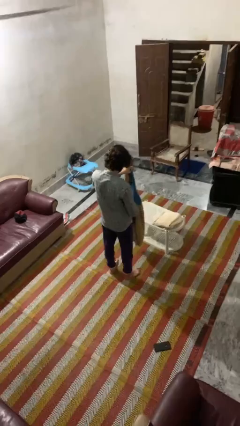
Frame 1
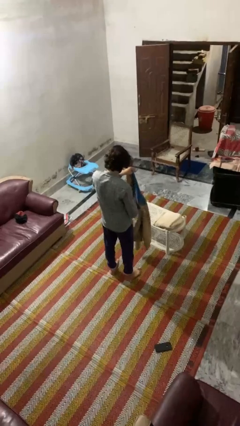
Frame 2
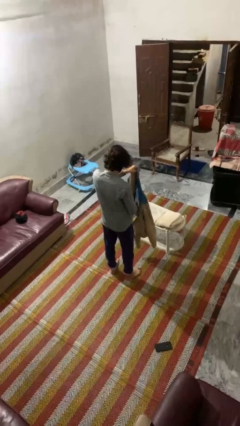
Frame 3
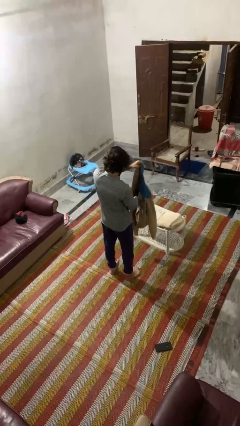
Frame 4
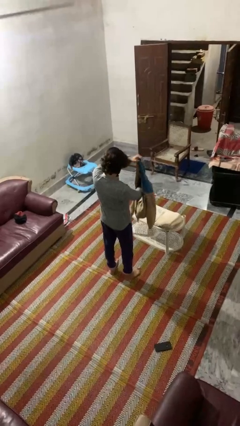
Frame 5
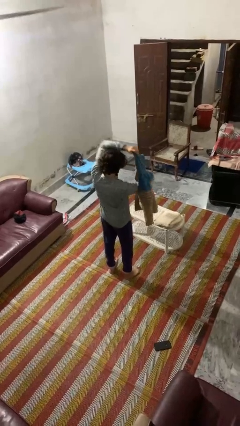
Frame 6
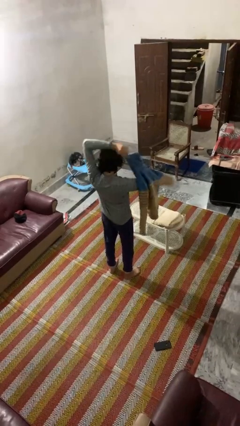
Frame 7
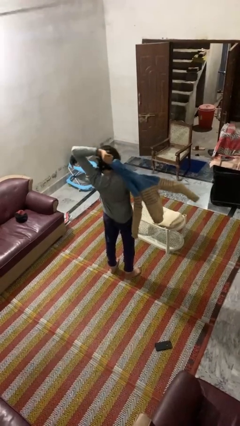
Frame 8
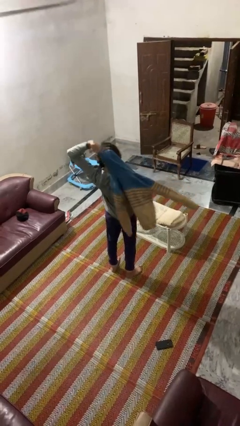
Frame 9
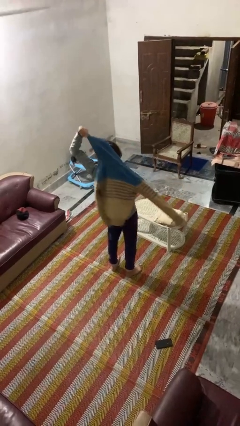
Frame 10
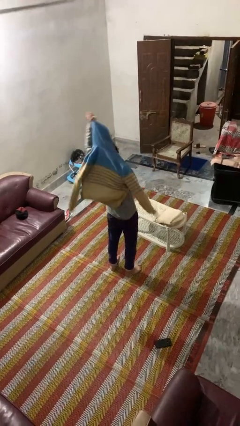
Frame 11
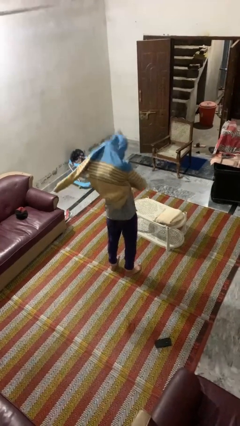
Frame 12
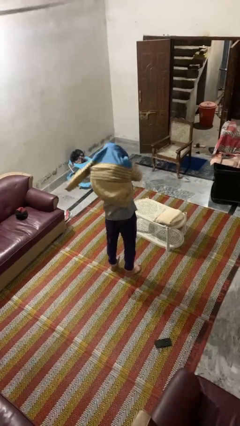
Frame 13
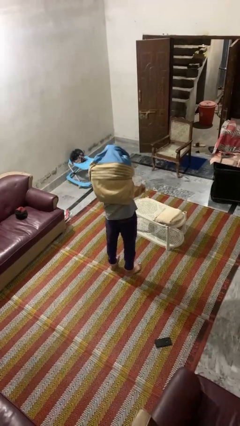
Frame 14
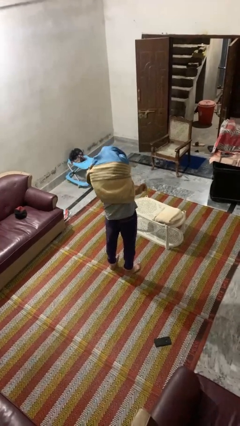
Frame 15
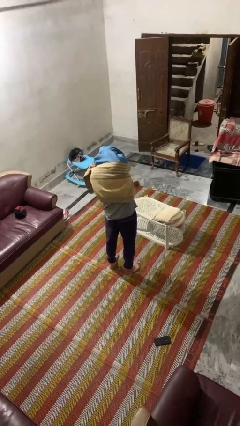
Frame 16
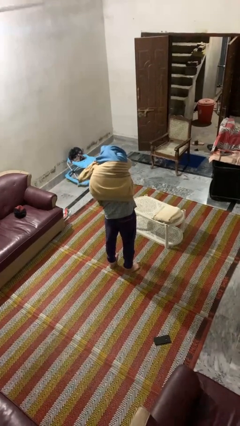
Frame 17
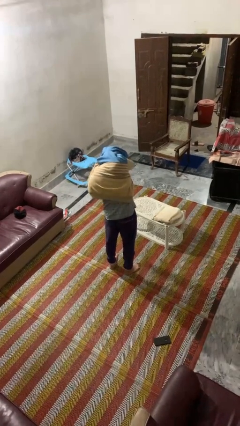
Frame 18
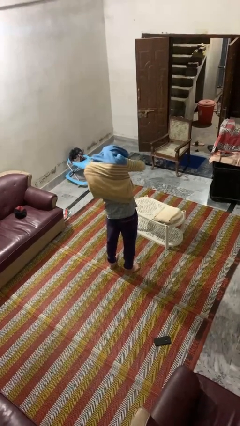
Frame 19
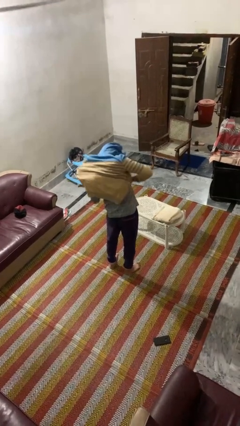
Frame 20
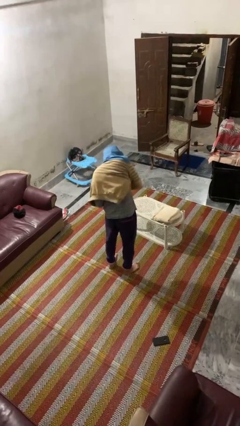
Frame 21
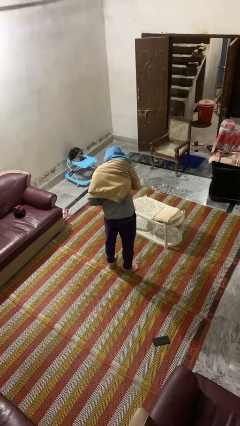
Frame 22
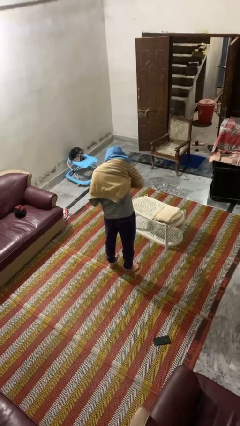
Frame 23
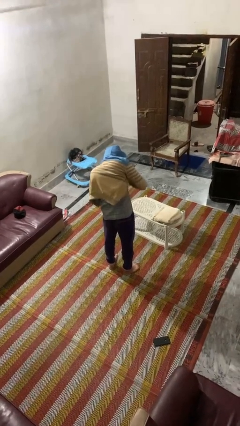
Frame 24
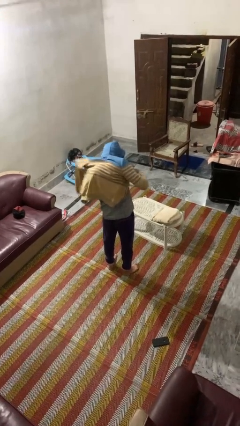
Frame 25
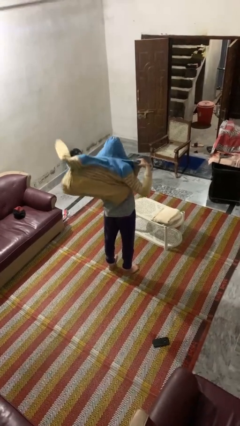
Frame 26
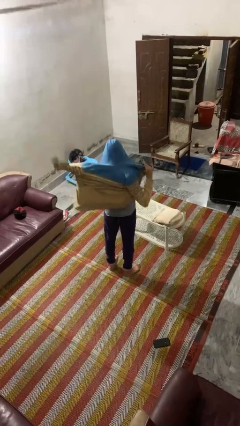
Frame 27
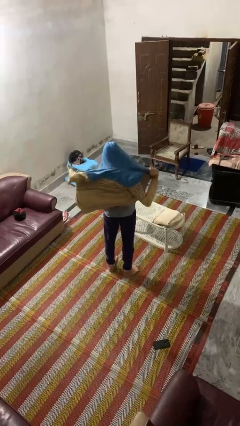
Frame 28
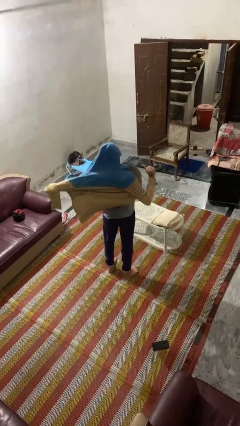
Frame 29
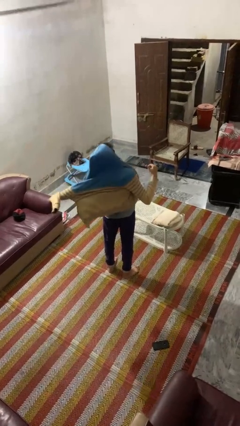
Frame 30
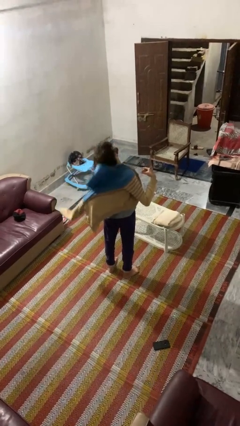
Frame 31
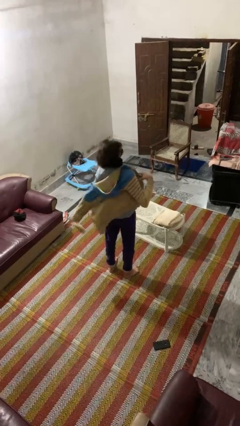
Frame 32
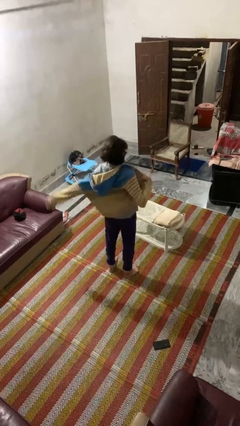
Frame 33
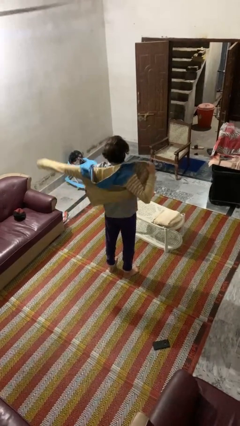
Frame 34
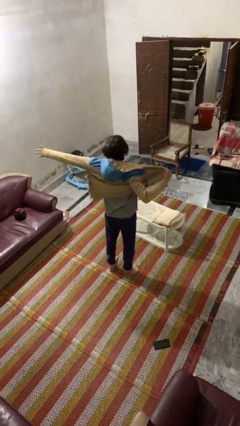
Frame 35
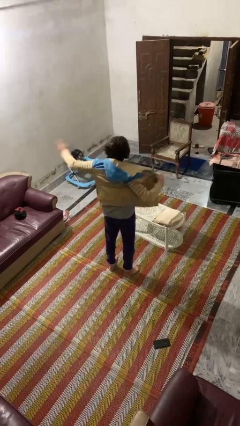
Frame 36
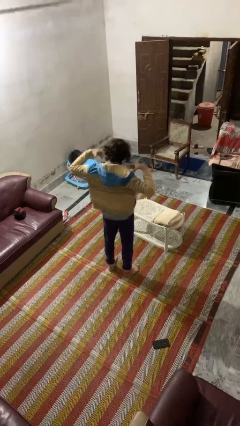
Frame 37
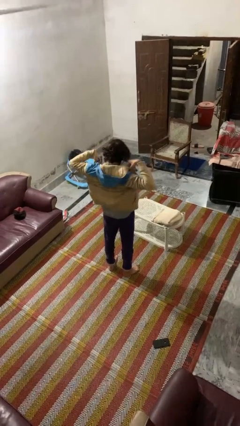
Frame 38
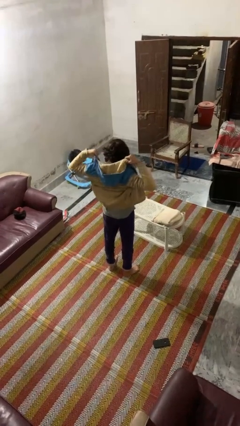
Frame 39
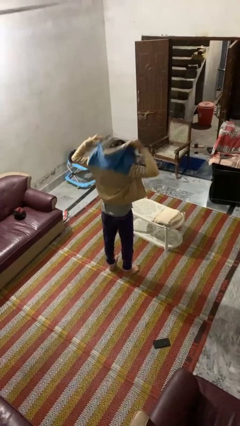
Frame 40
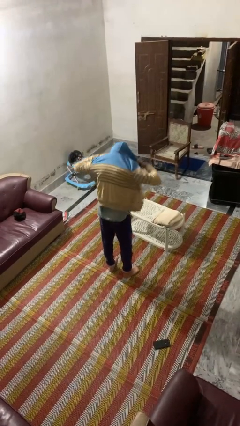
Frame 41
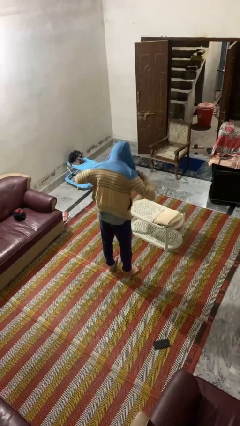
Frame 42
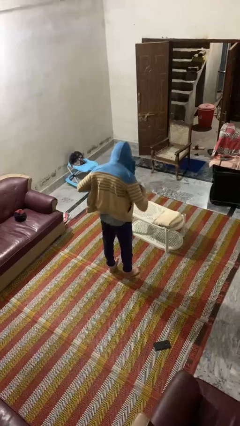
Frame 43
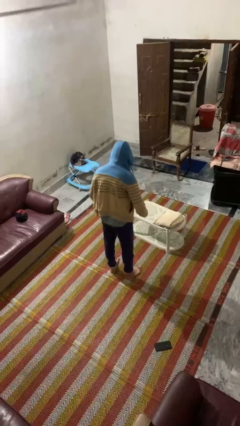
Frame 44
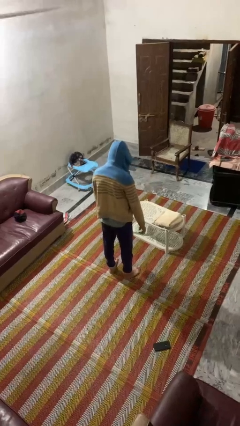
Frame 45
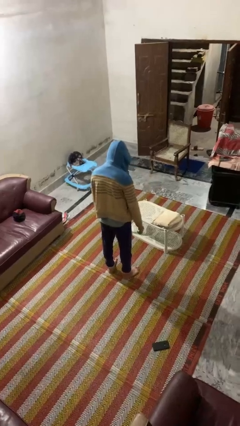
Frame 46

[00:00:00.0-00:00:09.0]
person puts on hoodie

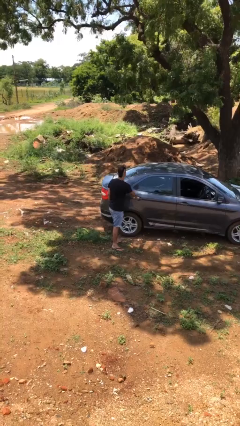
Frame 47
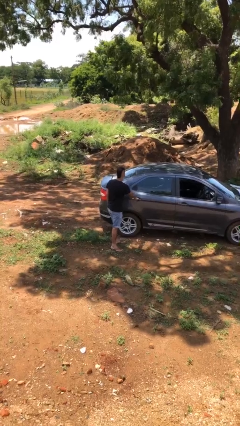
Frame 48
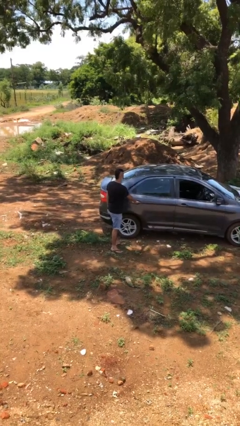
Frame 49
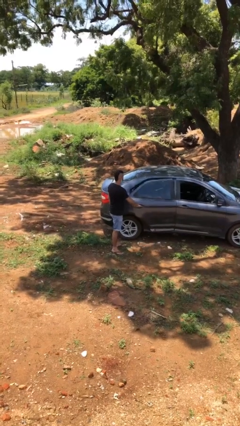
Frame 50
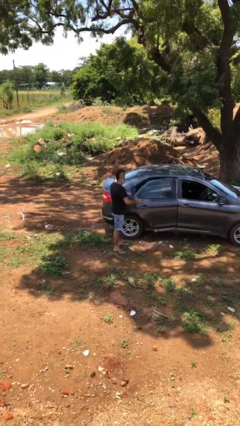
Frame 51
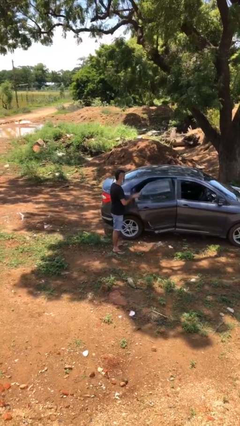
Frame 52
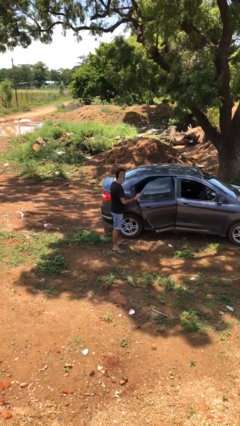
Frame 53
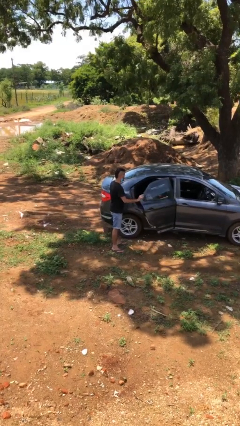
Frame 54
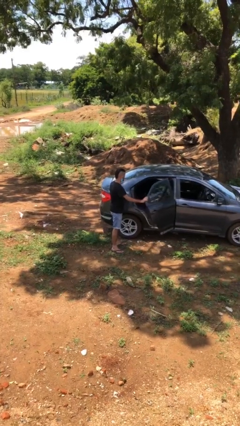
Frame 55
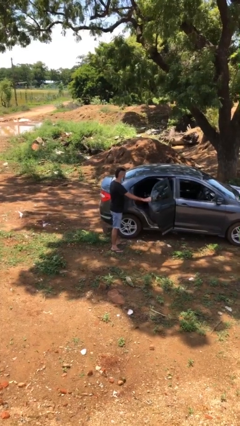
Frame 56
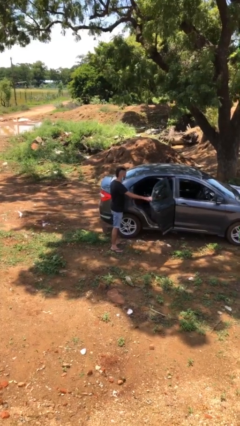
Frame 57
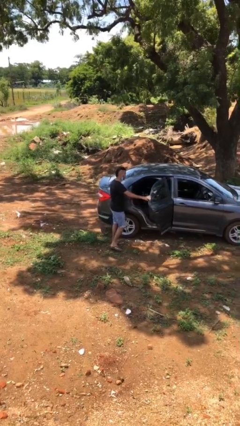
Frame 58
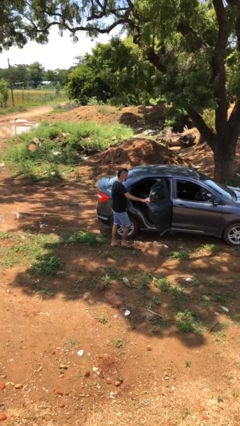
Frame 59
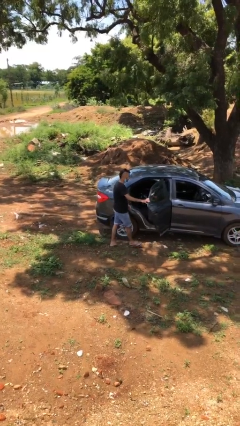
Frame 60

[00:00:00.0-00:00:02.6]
person opens car door

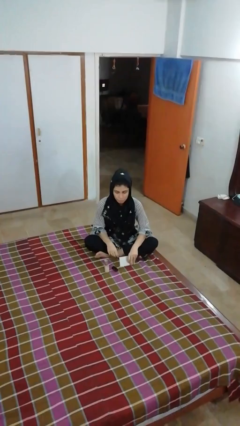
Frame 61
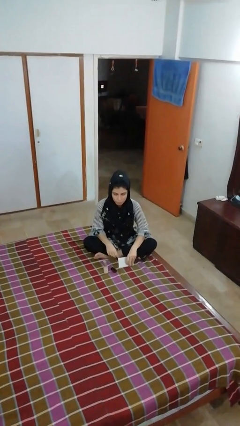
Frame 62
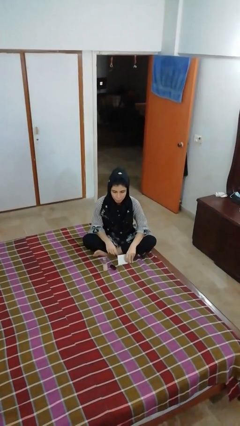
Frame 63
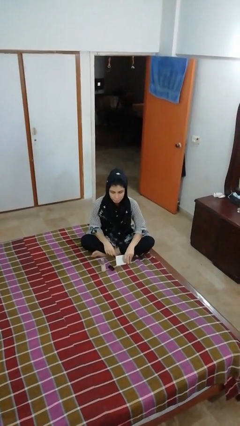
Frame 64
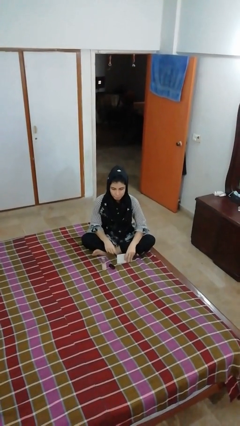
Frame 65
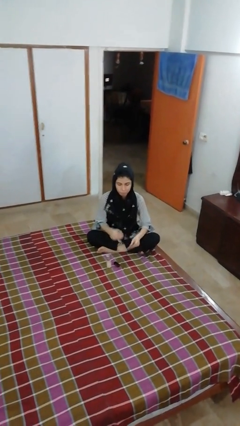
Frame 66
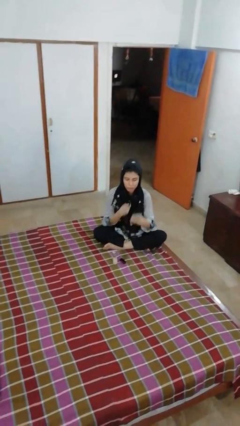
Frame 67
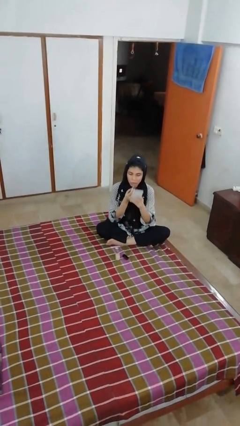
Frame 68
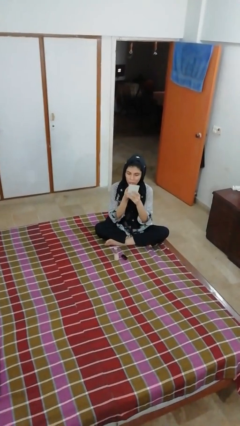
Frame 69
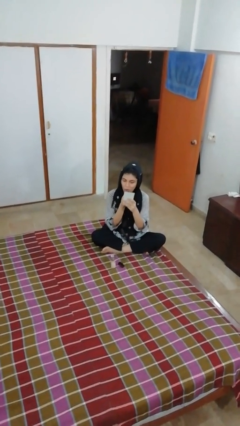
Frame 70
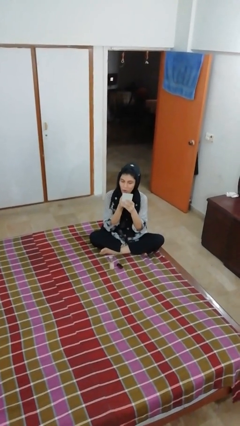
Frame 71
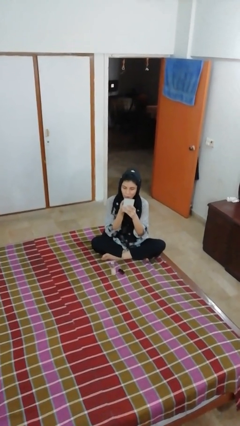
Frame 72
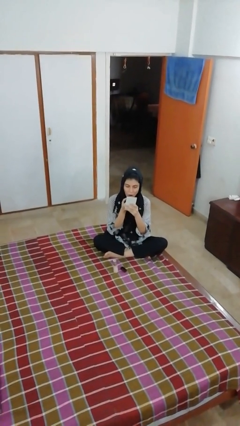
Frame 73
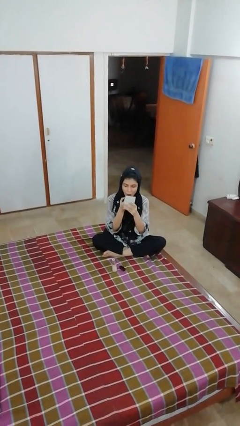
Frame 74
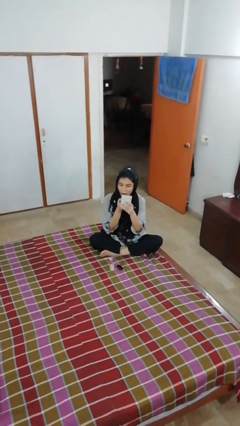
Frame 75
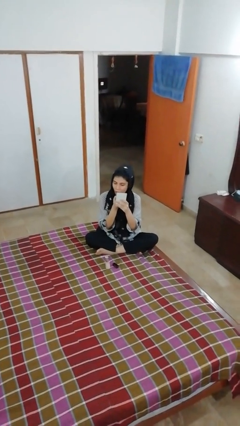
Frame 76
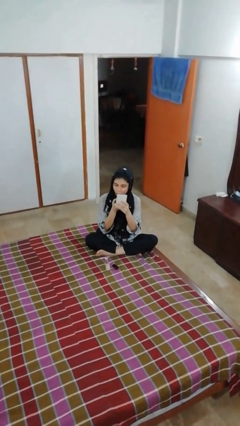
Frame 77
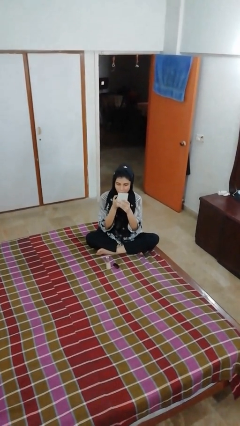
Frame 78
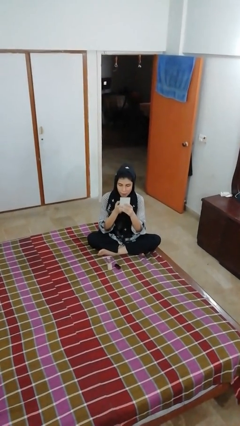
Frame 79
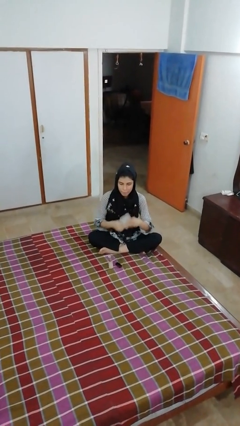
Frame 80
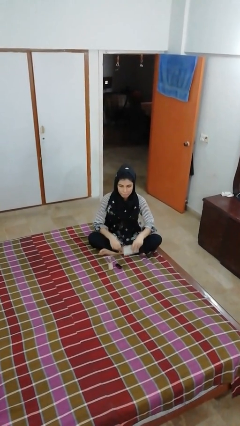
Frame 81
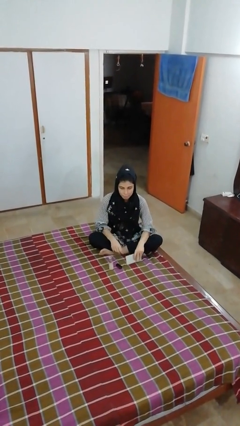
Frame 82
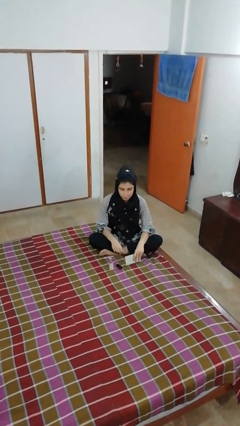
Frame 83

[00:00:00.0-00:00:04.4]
person applies lip makeup

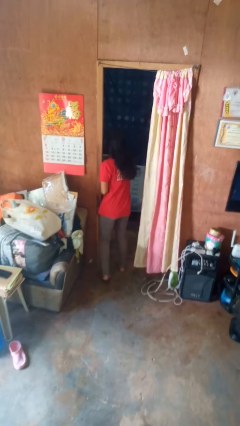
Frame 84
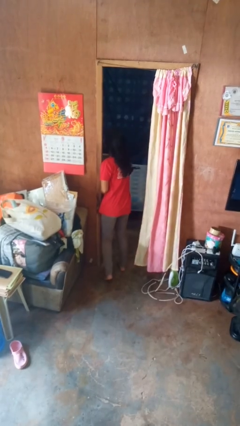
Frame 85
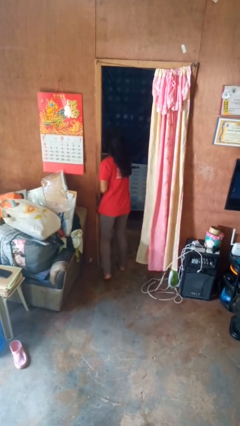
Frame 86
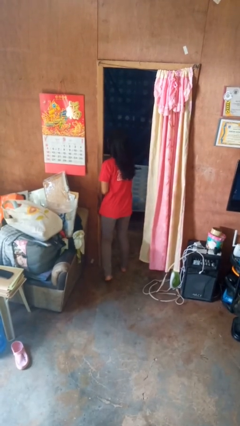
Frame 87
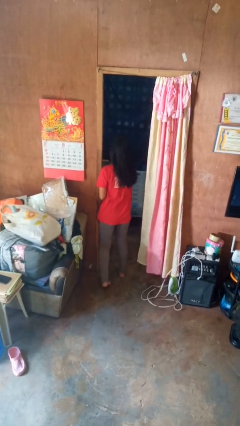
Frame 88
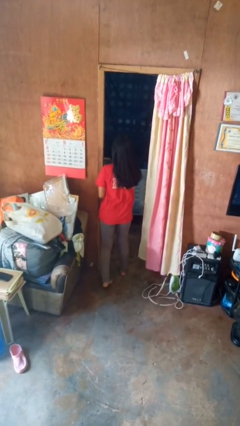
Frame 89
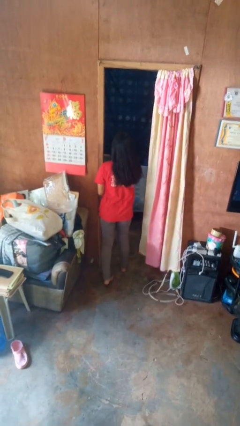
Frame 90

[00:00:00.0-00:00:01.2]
person bumps into wall

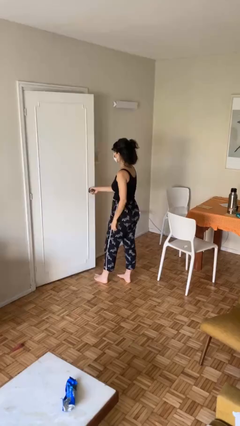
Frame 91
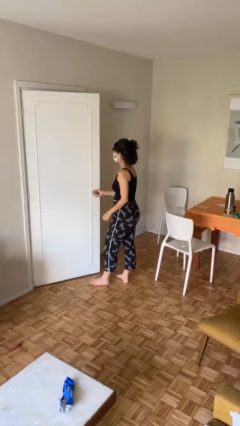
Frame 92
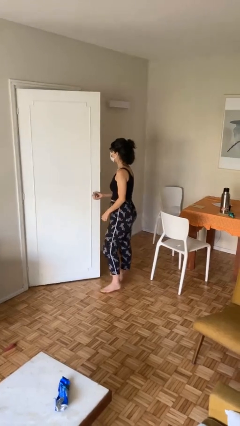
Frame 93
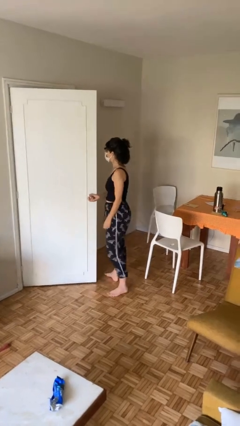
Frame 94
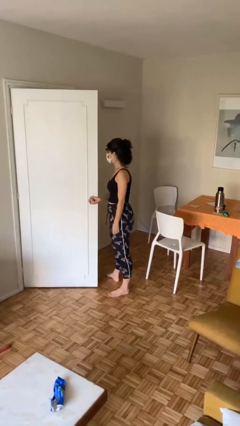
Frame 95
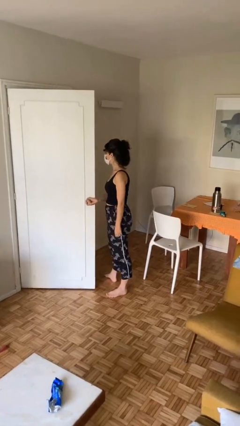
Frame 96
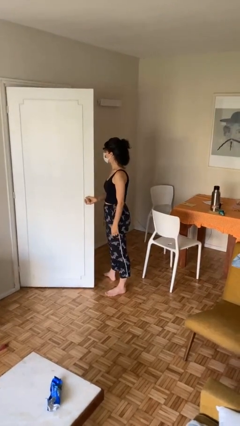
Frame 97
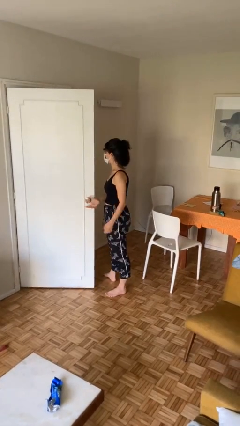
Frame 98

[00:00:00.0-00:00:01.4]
person opens facility door
